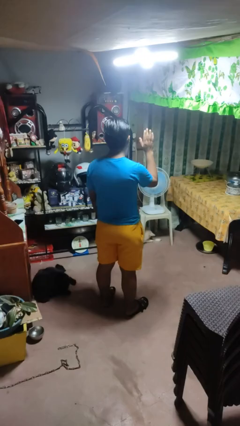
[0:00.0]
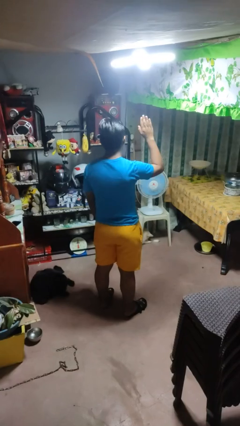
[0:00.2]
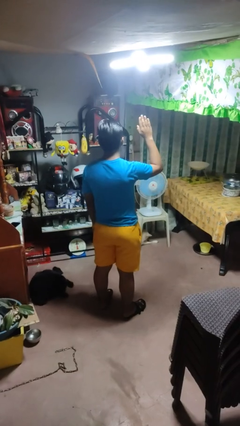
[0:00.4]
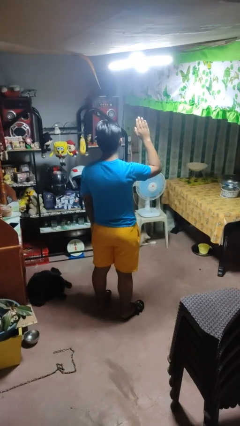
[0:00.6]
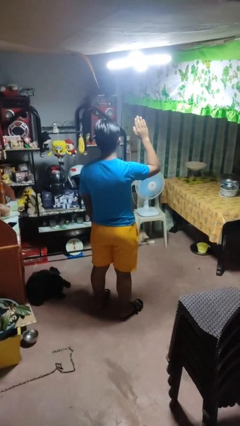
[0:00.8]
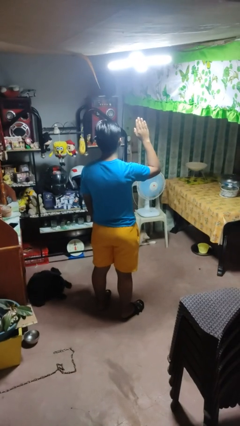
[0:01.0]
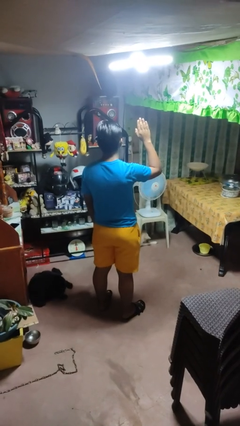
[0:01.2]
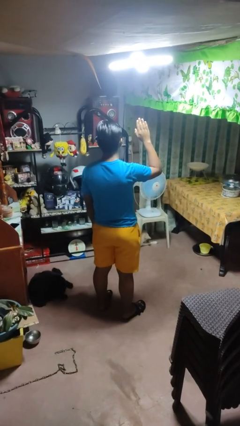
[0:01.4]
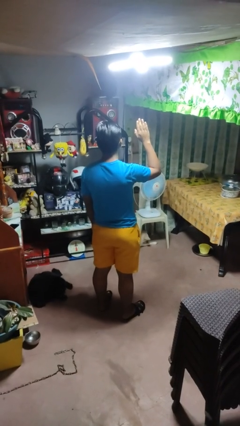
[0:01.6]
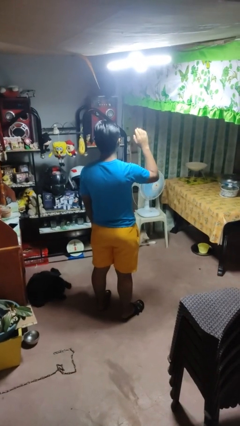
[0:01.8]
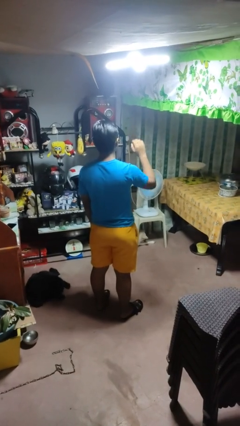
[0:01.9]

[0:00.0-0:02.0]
person gestures raise hand

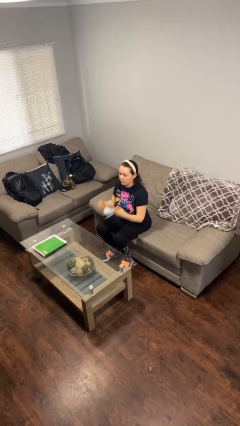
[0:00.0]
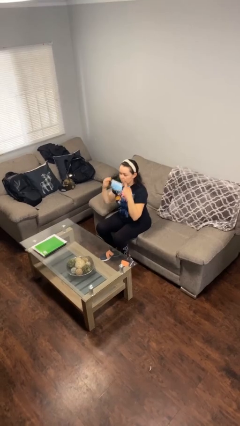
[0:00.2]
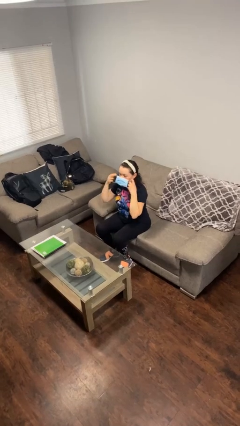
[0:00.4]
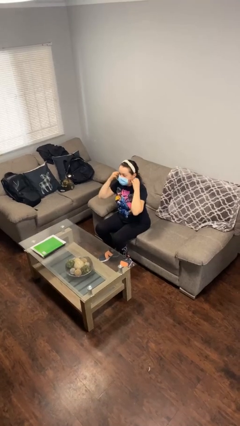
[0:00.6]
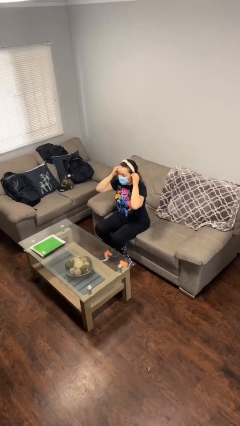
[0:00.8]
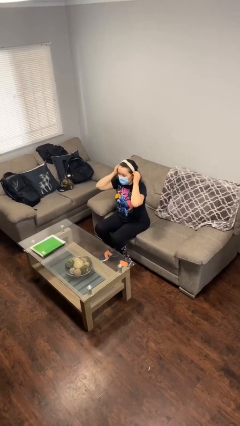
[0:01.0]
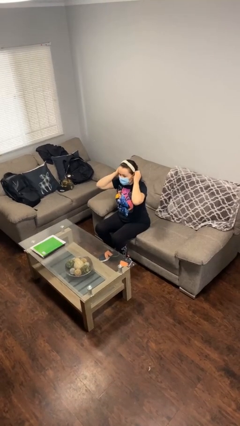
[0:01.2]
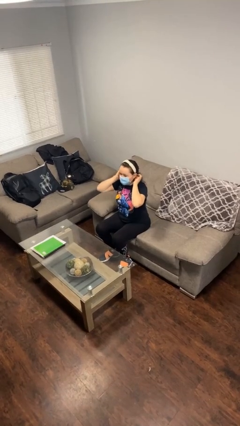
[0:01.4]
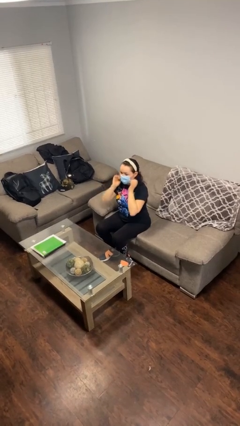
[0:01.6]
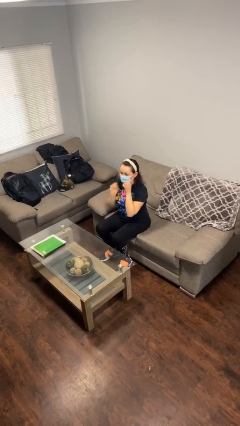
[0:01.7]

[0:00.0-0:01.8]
person puts on facemask

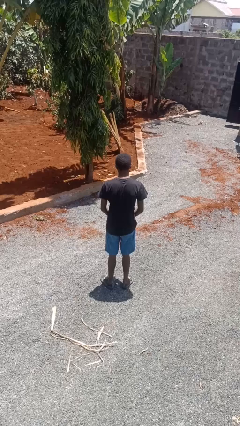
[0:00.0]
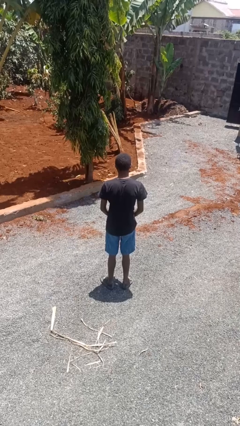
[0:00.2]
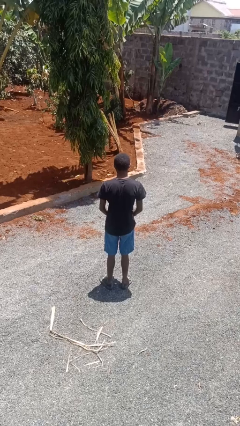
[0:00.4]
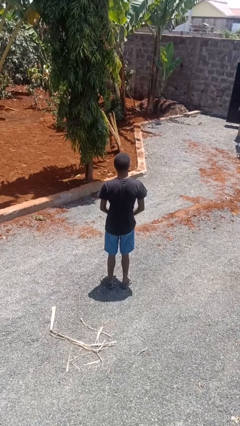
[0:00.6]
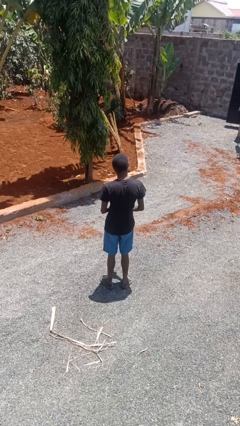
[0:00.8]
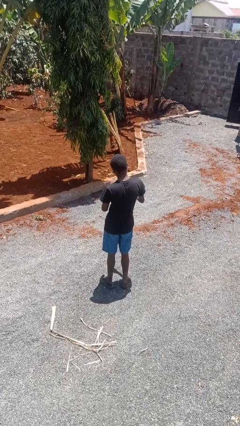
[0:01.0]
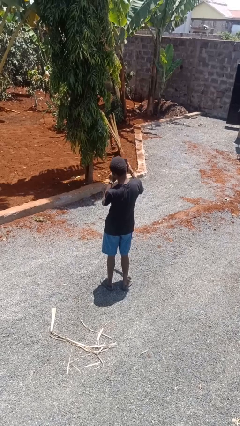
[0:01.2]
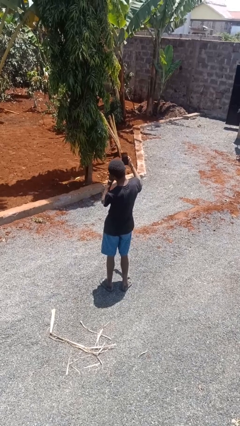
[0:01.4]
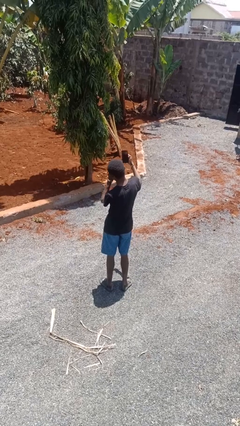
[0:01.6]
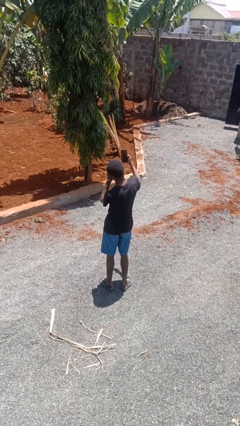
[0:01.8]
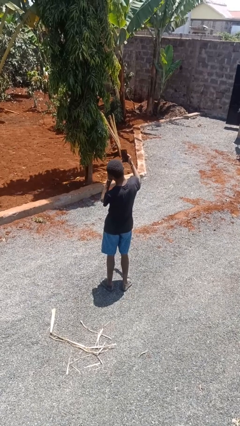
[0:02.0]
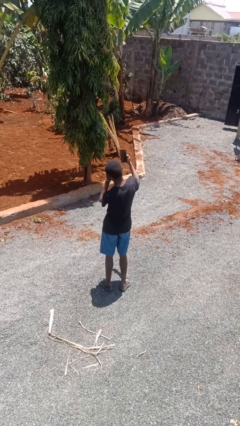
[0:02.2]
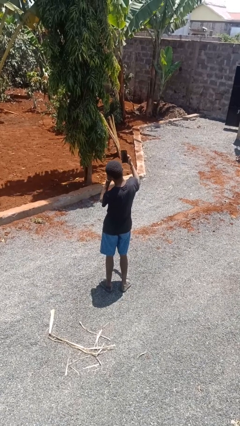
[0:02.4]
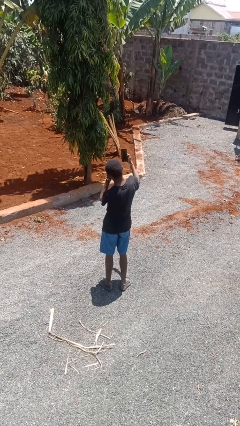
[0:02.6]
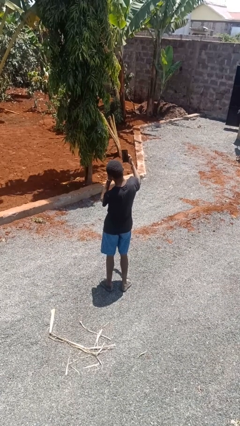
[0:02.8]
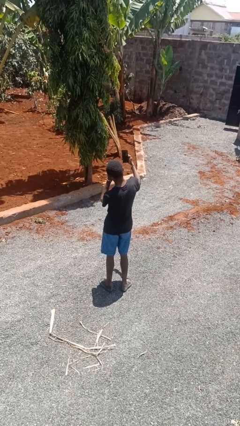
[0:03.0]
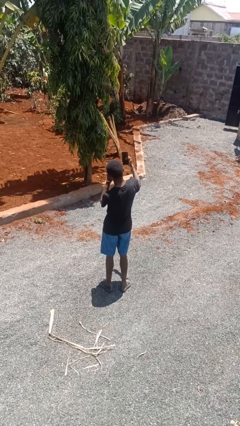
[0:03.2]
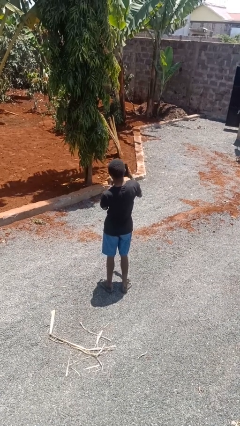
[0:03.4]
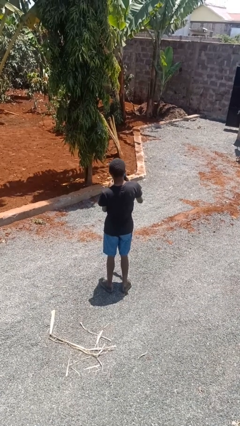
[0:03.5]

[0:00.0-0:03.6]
person takes selfie

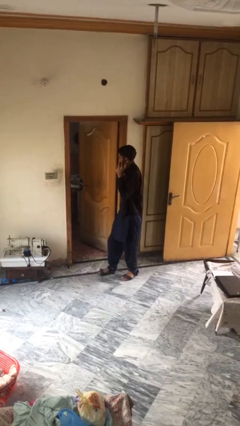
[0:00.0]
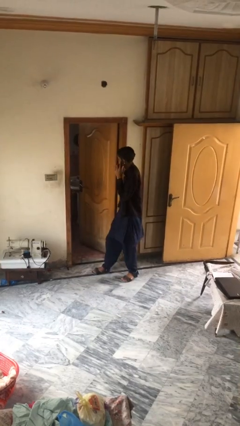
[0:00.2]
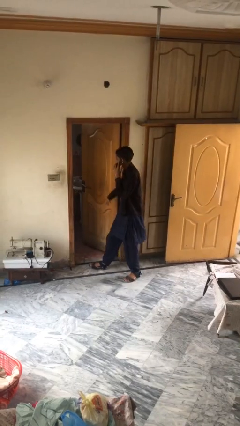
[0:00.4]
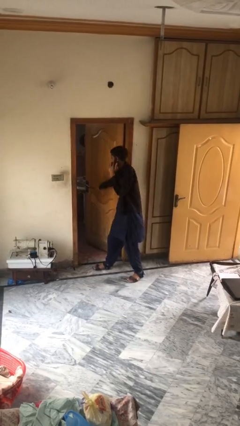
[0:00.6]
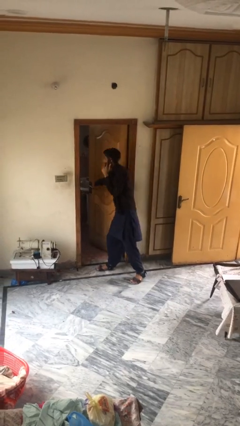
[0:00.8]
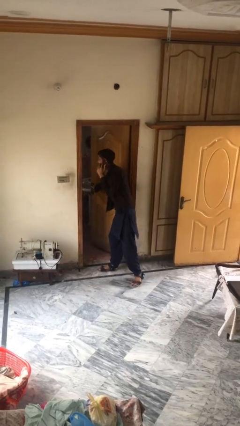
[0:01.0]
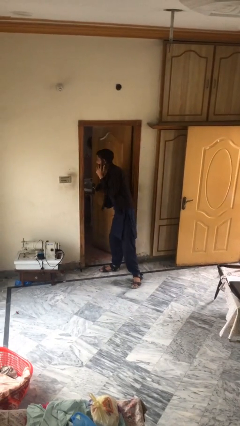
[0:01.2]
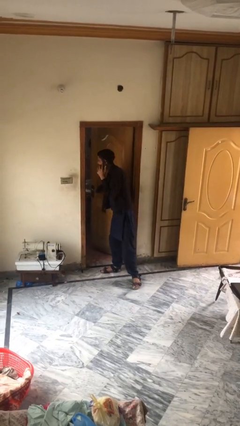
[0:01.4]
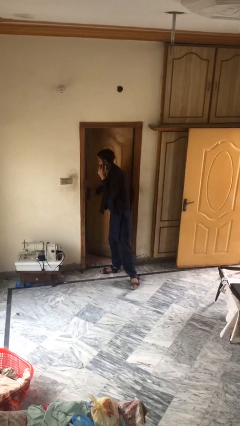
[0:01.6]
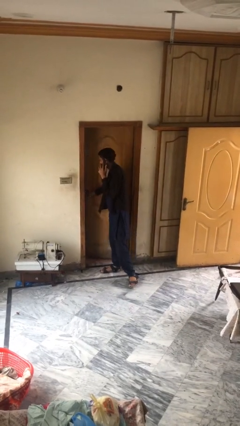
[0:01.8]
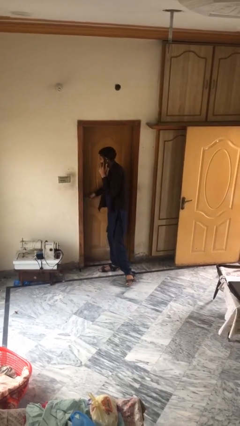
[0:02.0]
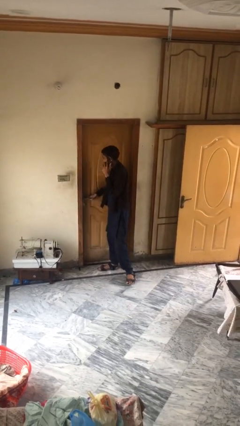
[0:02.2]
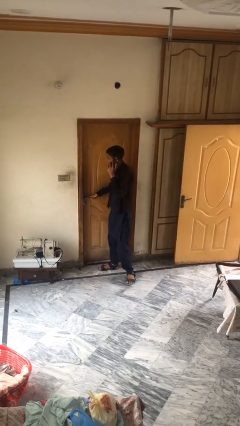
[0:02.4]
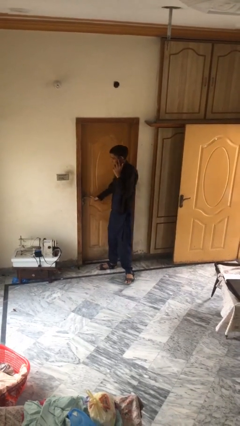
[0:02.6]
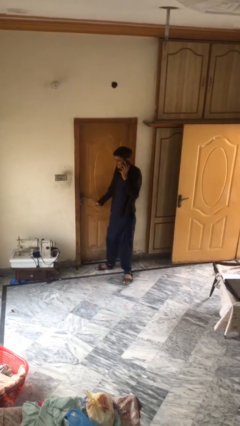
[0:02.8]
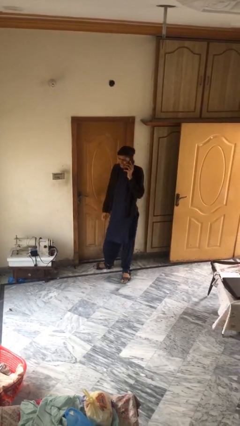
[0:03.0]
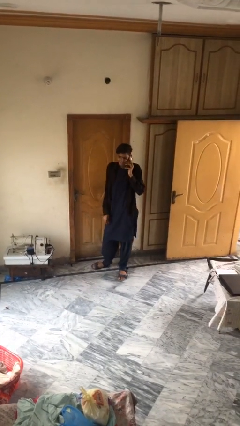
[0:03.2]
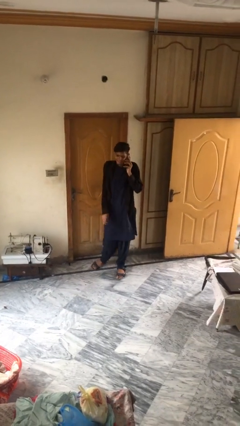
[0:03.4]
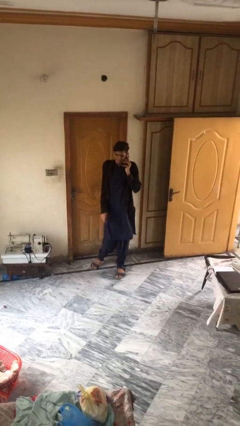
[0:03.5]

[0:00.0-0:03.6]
person closes facility door

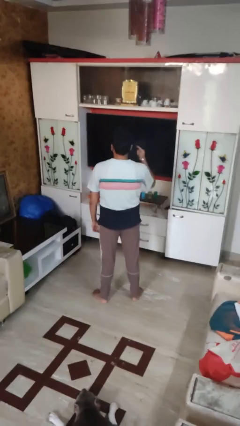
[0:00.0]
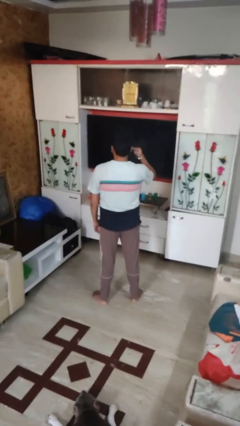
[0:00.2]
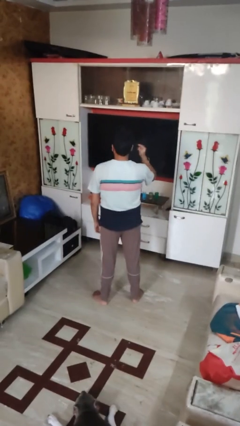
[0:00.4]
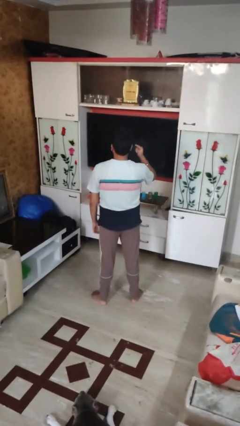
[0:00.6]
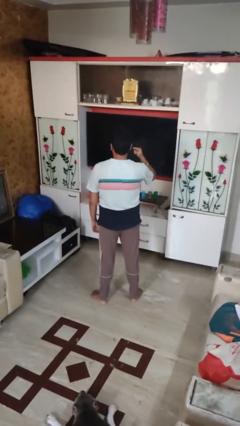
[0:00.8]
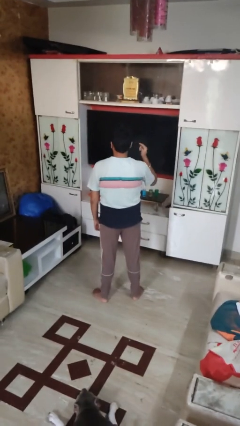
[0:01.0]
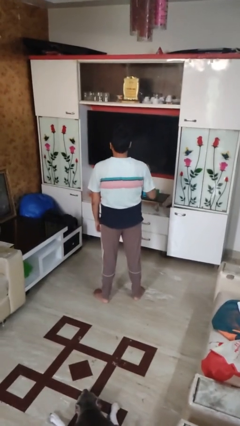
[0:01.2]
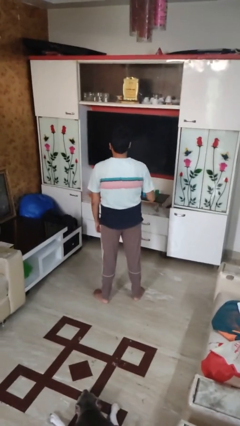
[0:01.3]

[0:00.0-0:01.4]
person gestures listen closely

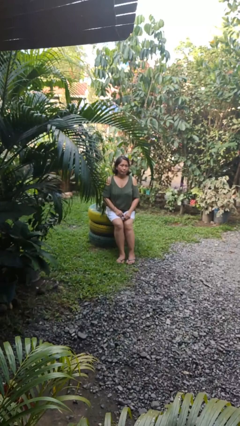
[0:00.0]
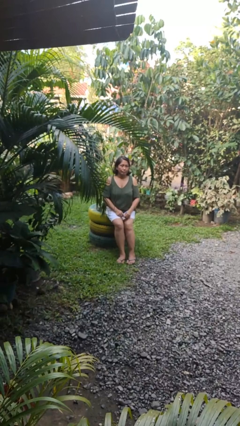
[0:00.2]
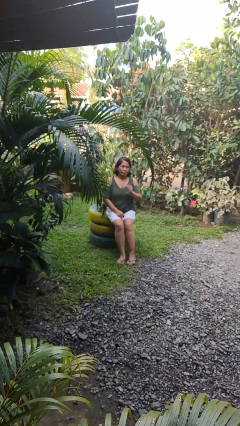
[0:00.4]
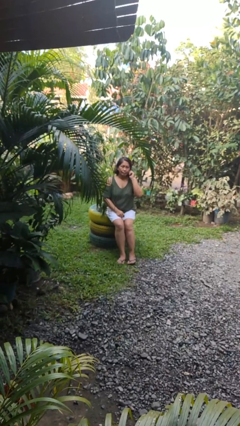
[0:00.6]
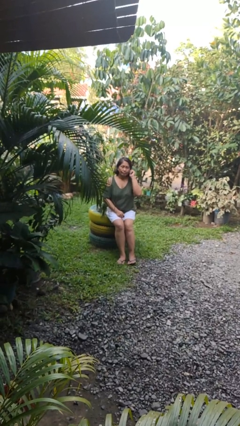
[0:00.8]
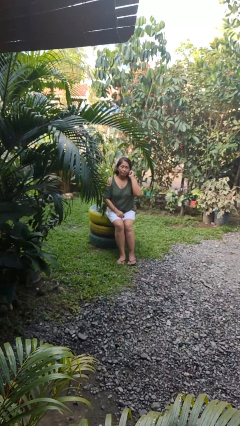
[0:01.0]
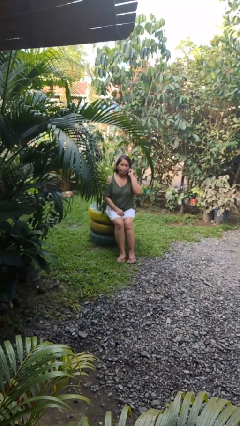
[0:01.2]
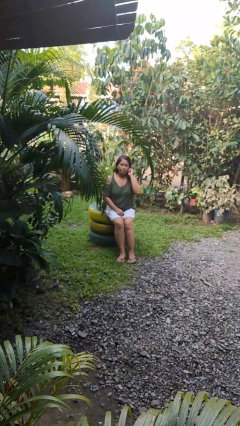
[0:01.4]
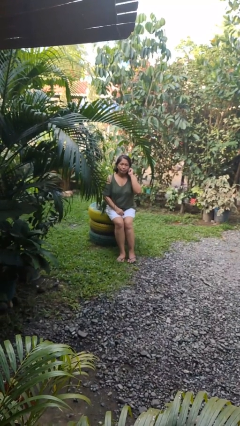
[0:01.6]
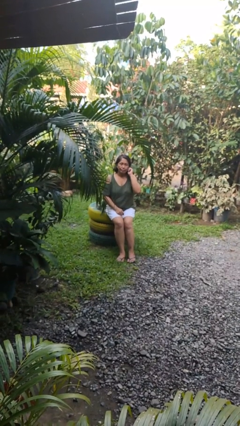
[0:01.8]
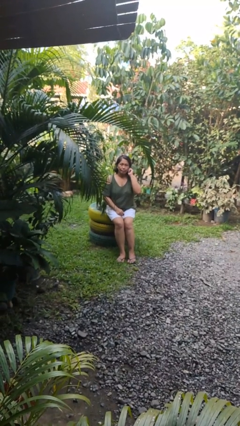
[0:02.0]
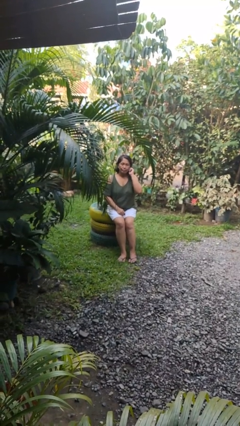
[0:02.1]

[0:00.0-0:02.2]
person touches earlobe

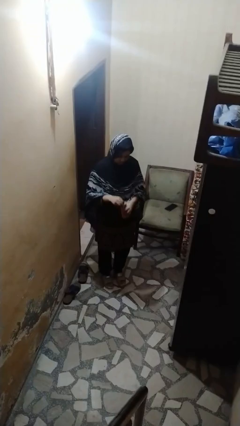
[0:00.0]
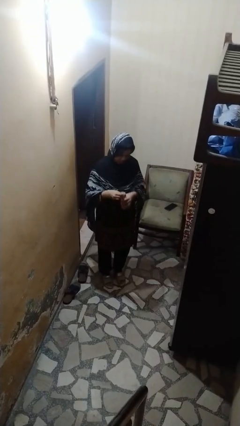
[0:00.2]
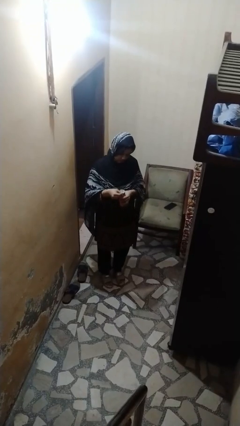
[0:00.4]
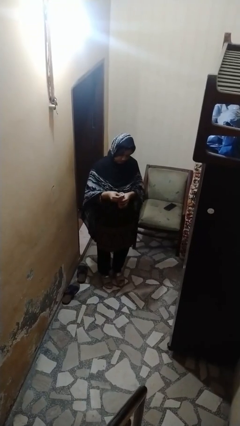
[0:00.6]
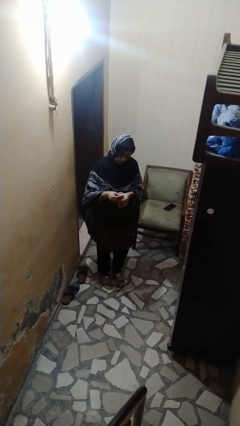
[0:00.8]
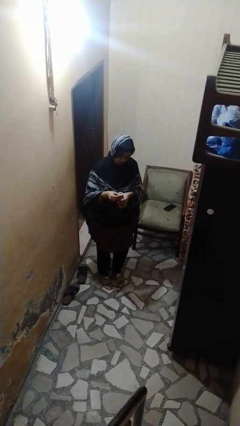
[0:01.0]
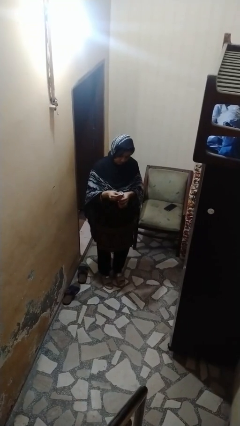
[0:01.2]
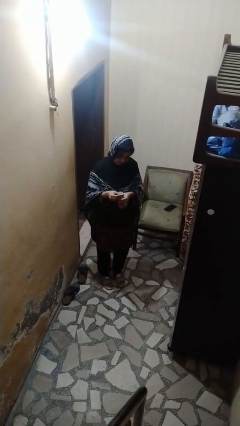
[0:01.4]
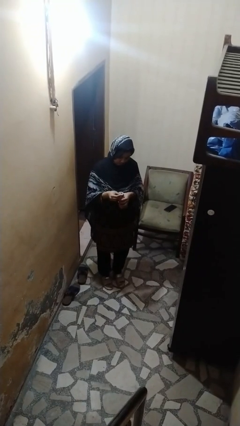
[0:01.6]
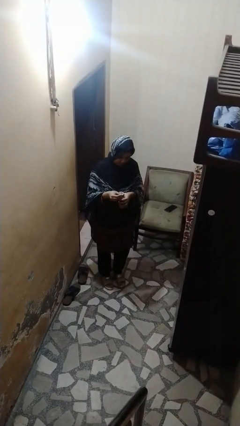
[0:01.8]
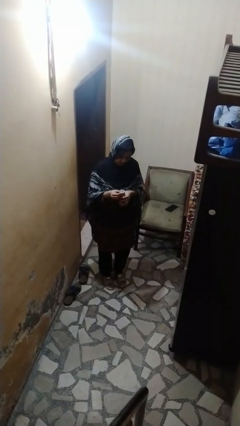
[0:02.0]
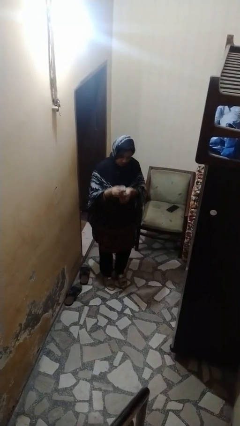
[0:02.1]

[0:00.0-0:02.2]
person opens beverage can

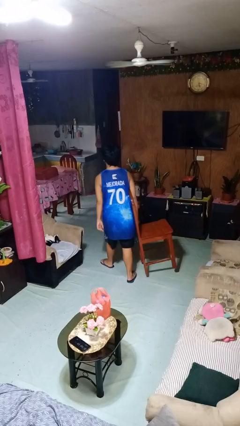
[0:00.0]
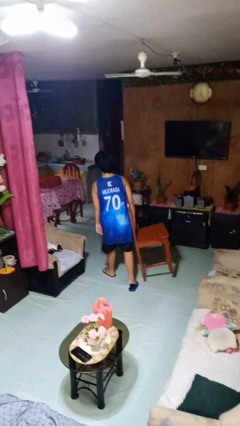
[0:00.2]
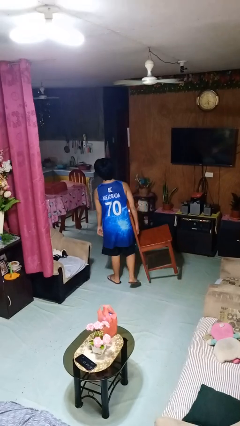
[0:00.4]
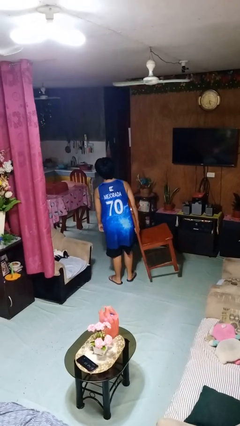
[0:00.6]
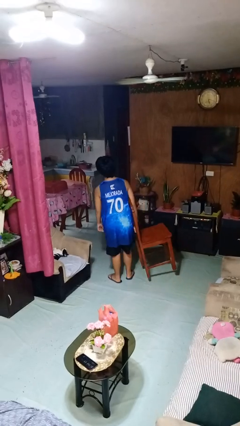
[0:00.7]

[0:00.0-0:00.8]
person carries furniture
